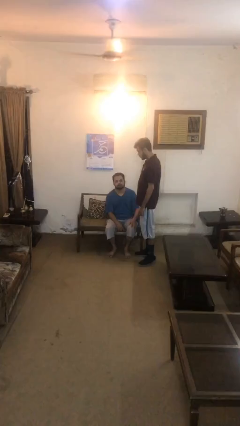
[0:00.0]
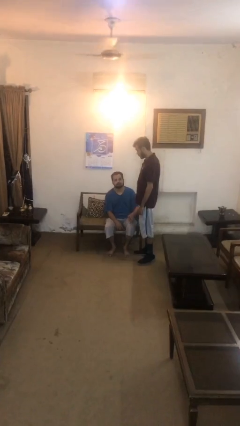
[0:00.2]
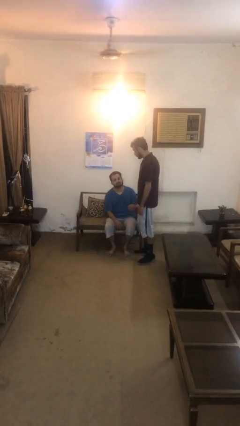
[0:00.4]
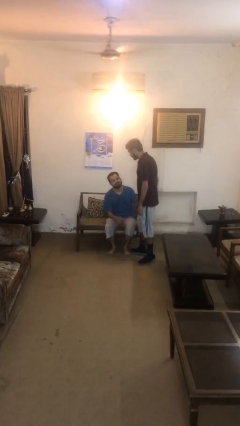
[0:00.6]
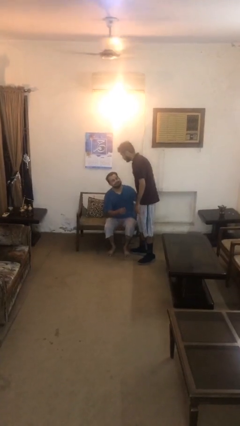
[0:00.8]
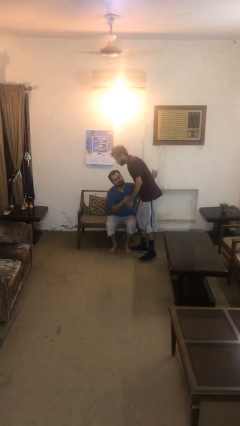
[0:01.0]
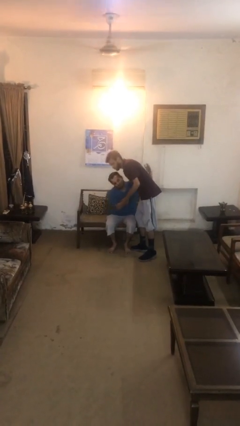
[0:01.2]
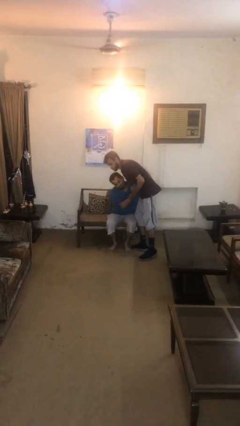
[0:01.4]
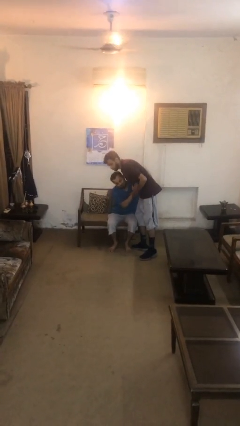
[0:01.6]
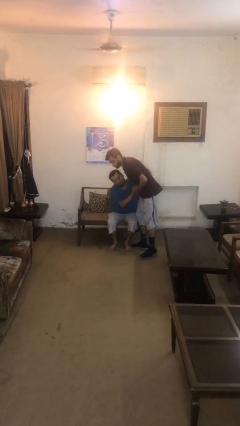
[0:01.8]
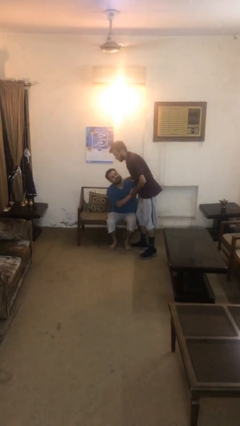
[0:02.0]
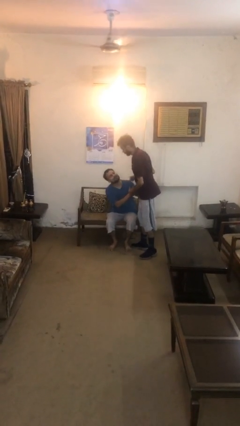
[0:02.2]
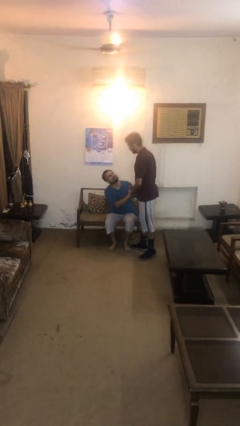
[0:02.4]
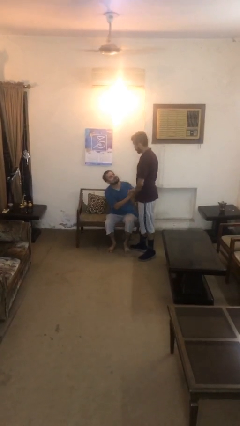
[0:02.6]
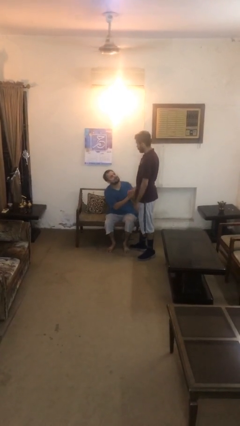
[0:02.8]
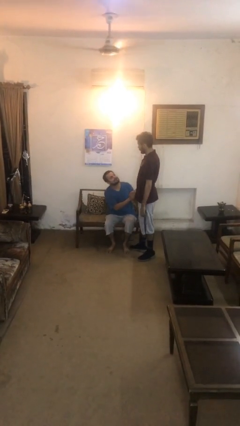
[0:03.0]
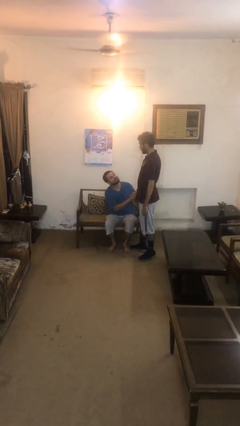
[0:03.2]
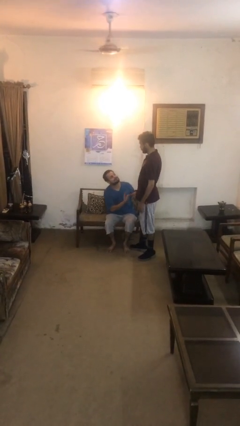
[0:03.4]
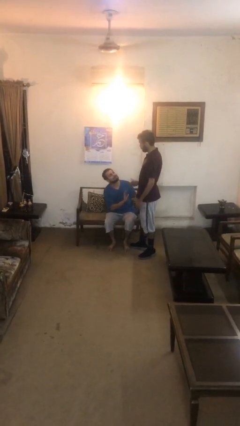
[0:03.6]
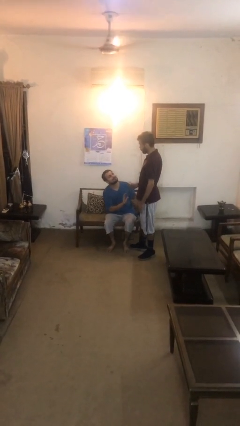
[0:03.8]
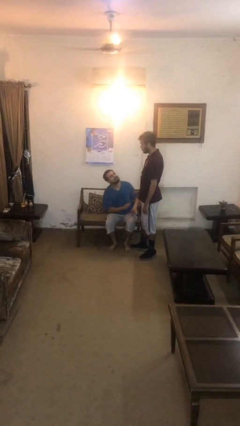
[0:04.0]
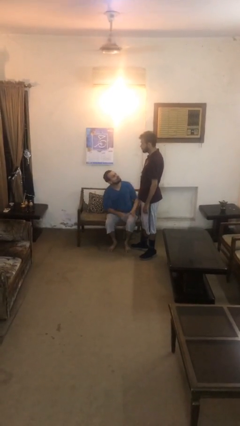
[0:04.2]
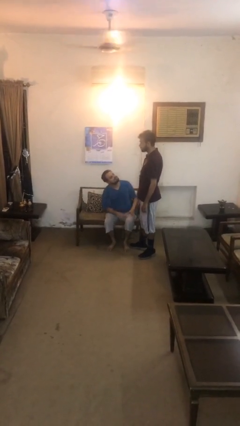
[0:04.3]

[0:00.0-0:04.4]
person embraces person

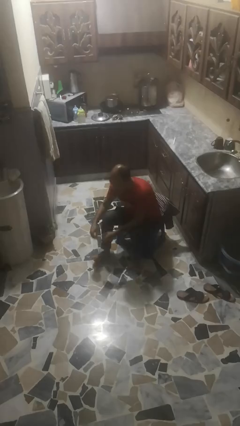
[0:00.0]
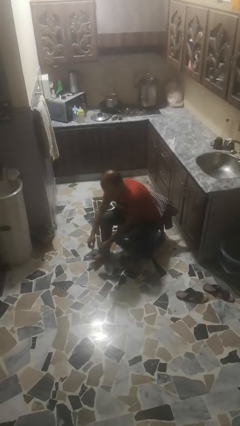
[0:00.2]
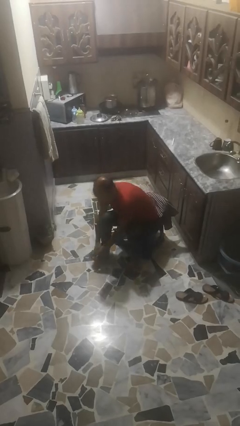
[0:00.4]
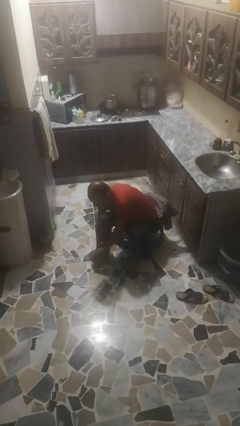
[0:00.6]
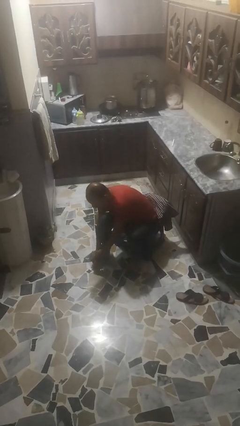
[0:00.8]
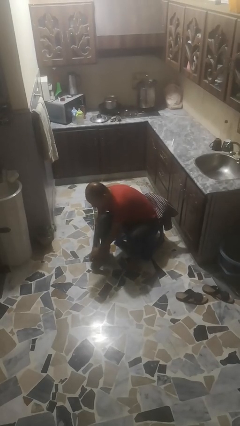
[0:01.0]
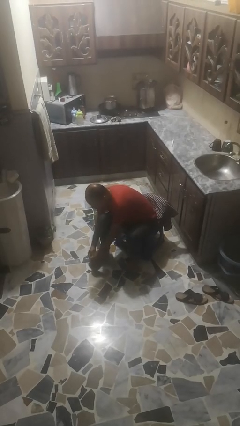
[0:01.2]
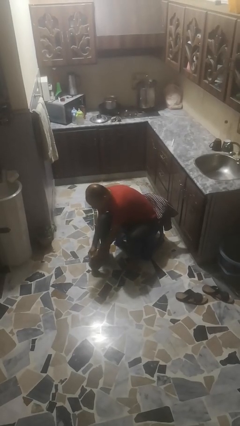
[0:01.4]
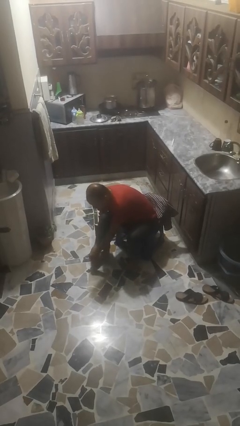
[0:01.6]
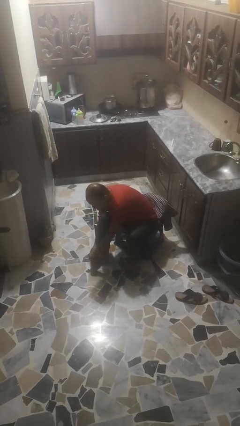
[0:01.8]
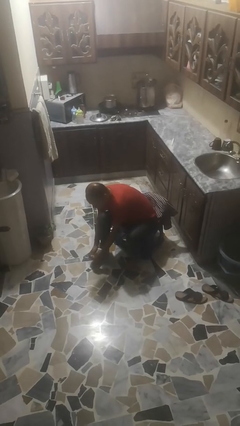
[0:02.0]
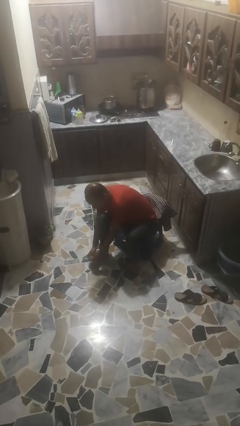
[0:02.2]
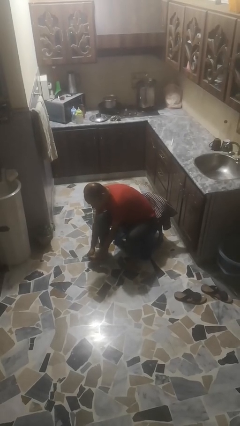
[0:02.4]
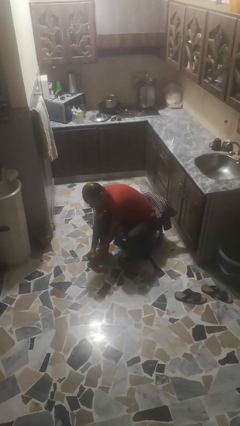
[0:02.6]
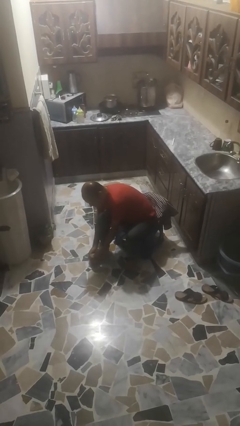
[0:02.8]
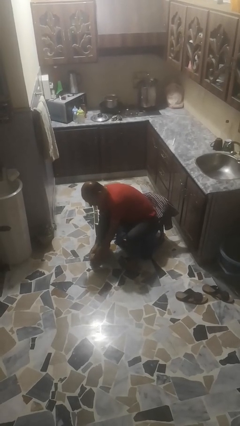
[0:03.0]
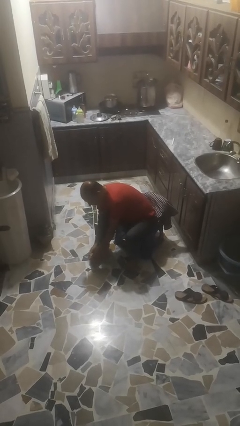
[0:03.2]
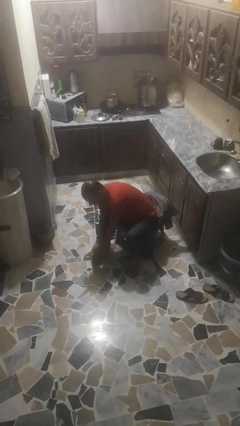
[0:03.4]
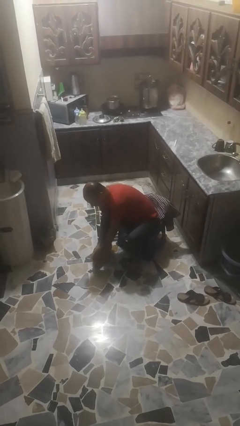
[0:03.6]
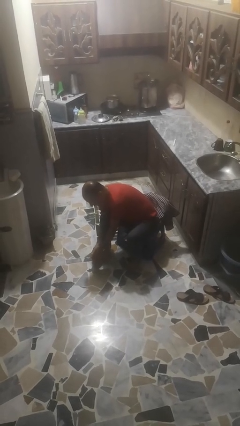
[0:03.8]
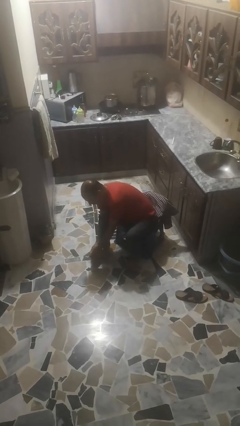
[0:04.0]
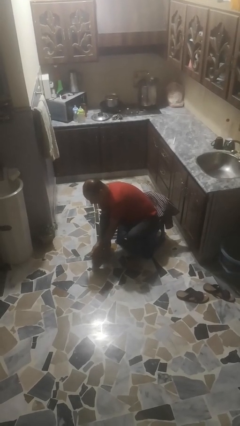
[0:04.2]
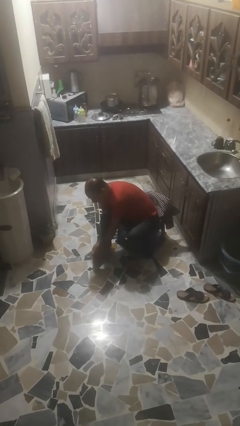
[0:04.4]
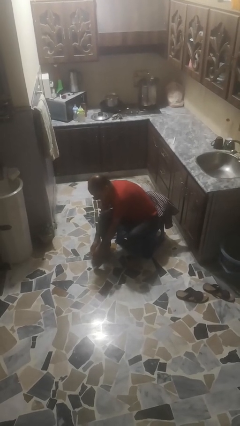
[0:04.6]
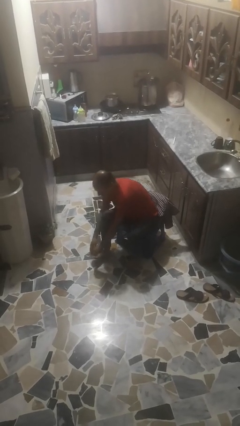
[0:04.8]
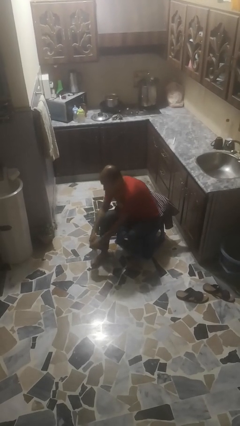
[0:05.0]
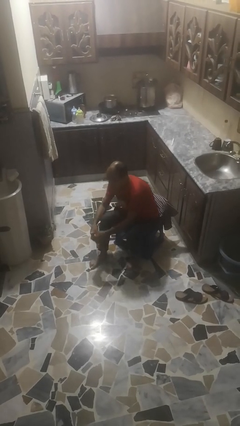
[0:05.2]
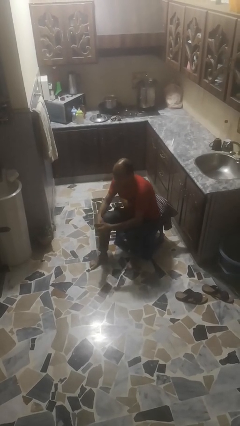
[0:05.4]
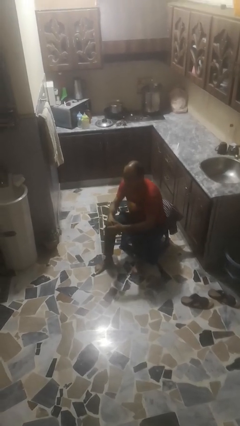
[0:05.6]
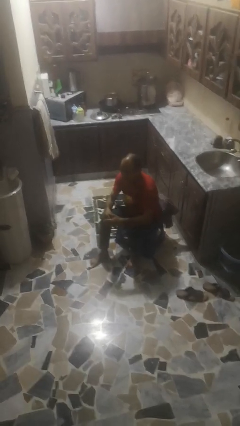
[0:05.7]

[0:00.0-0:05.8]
person stubs toe

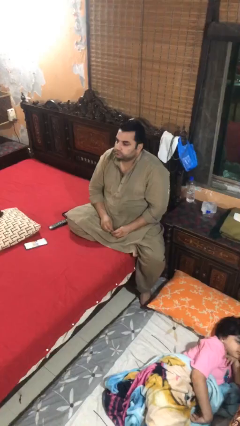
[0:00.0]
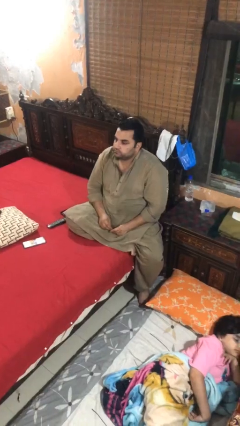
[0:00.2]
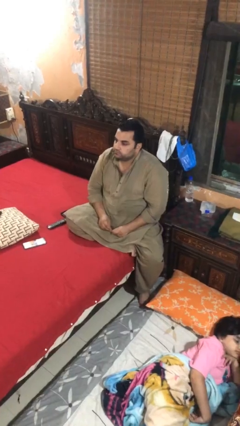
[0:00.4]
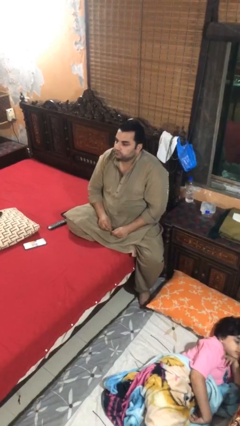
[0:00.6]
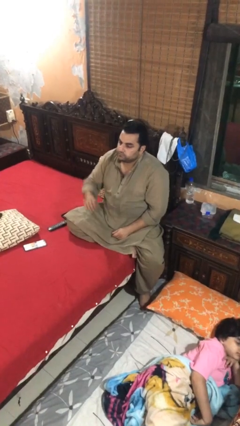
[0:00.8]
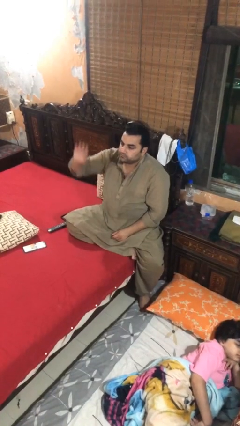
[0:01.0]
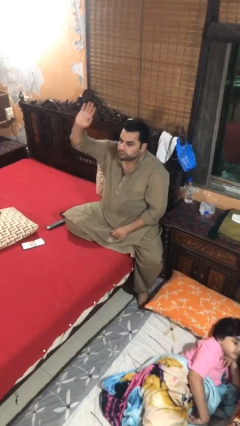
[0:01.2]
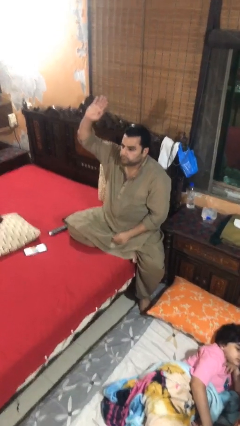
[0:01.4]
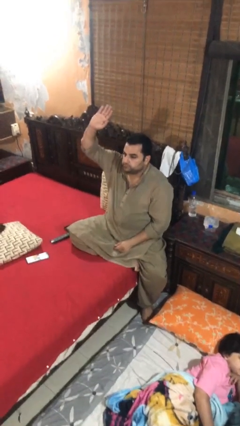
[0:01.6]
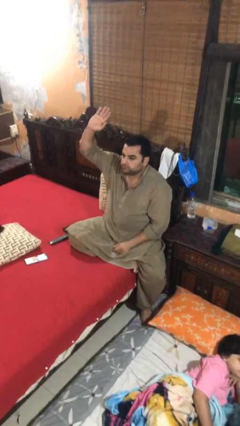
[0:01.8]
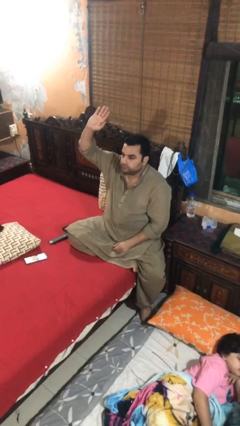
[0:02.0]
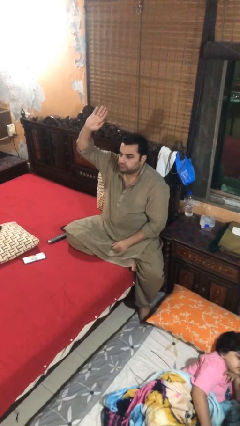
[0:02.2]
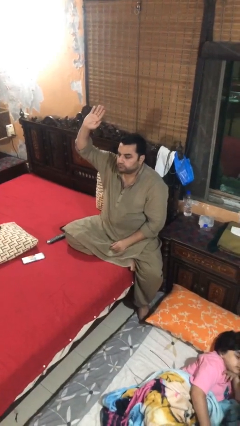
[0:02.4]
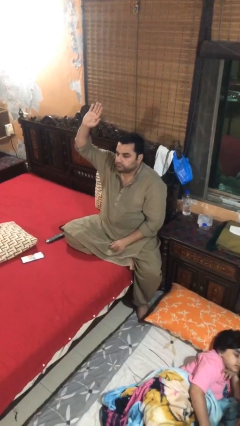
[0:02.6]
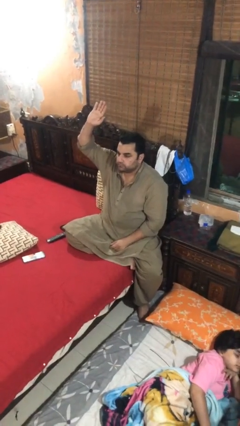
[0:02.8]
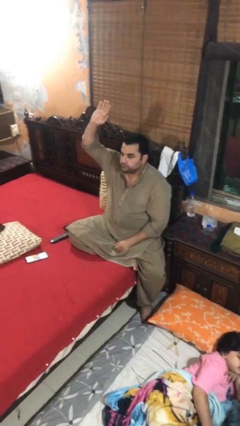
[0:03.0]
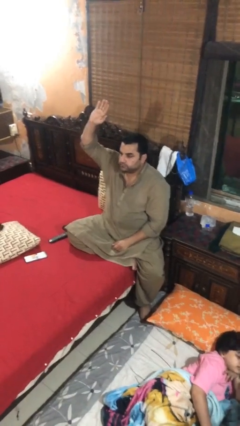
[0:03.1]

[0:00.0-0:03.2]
person gestures raise hand

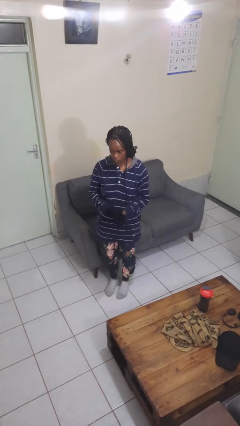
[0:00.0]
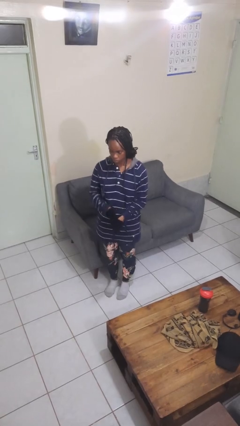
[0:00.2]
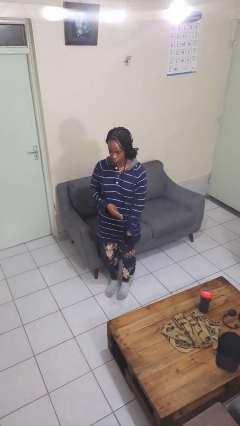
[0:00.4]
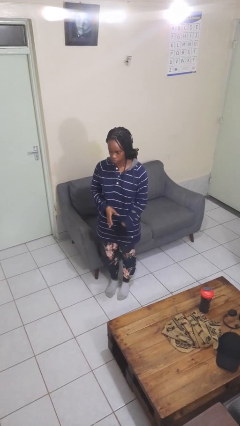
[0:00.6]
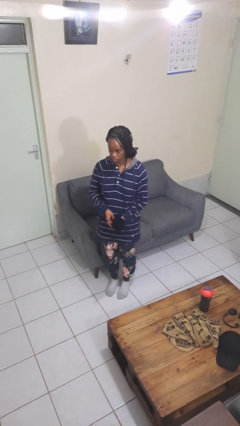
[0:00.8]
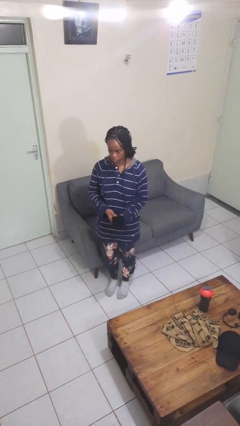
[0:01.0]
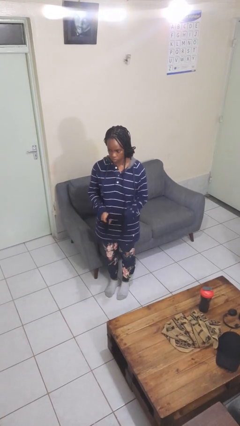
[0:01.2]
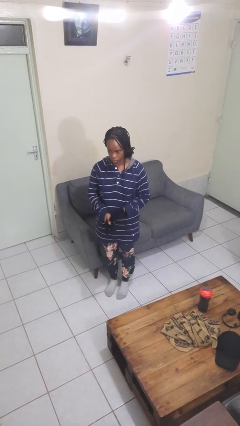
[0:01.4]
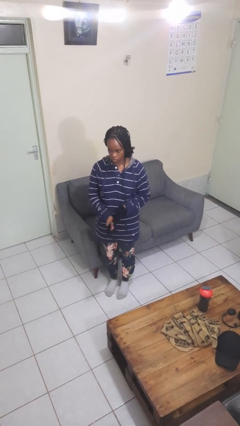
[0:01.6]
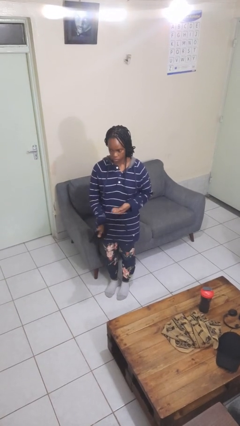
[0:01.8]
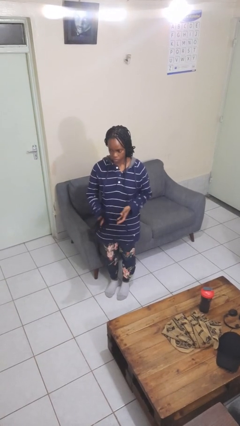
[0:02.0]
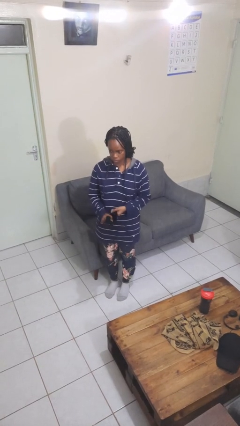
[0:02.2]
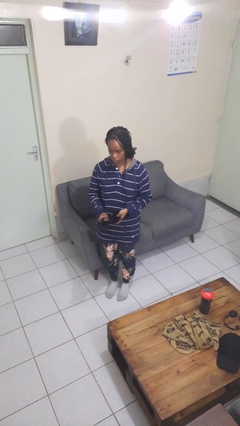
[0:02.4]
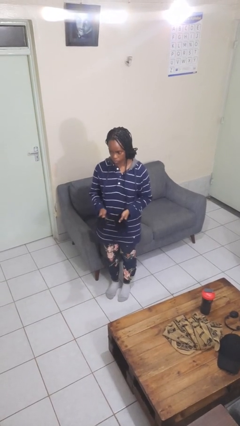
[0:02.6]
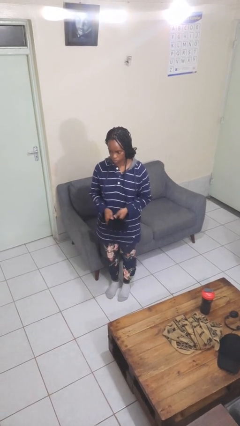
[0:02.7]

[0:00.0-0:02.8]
person takes off gloves

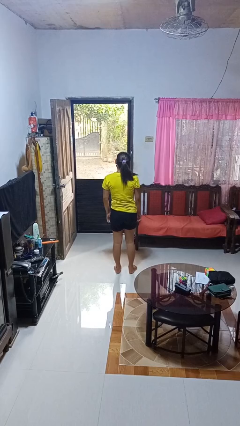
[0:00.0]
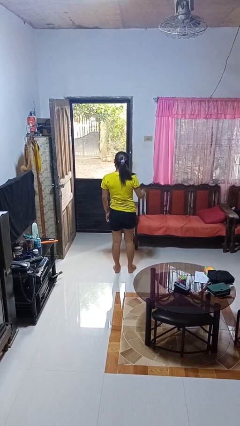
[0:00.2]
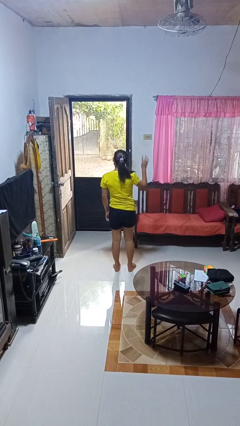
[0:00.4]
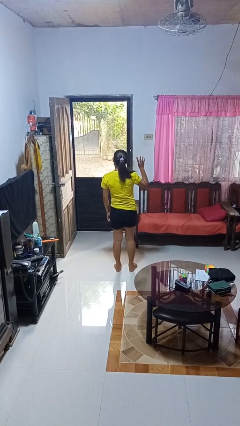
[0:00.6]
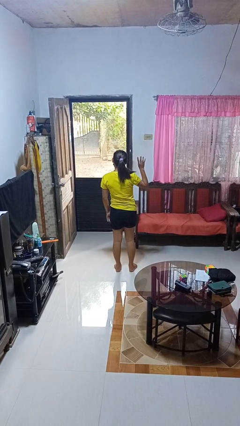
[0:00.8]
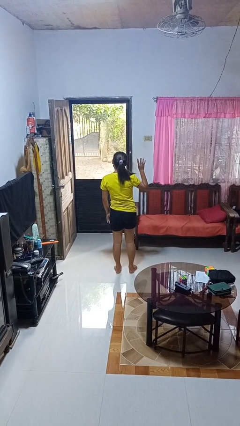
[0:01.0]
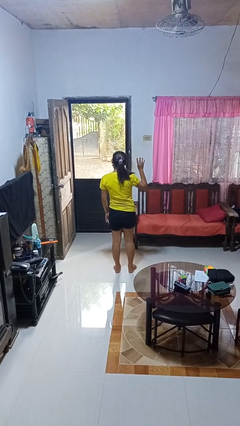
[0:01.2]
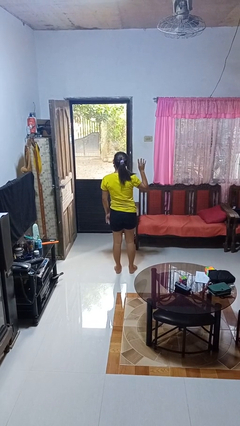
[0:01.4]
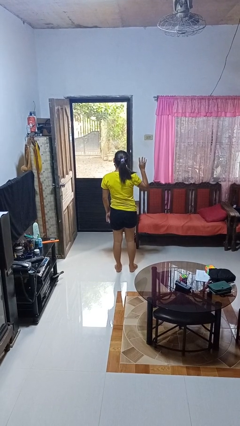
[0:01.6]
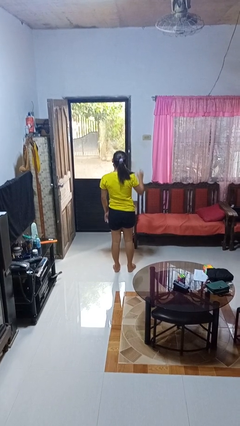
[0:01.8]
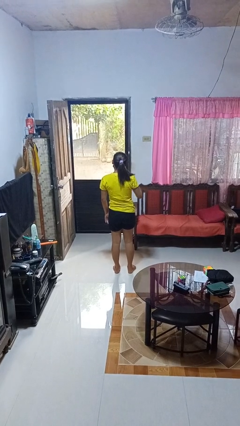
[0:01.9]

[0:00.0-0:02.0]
person gestures number four
